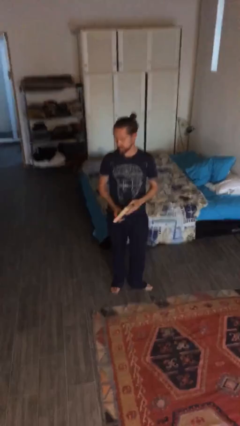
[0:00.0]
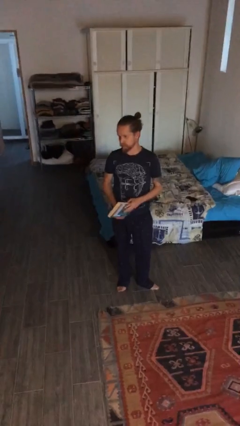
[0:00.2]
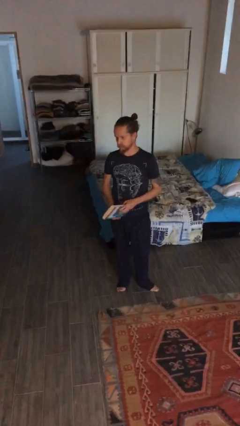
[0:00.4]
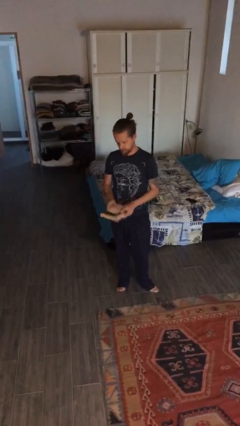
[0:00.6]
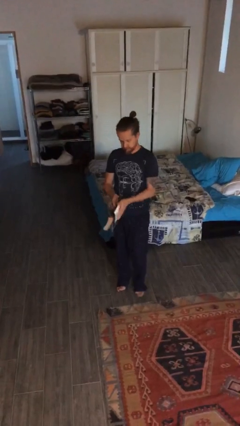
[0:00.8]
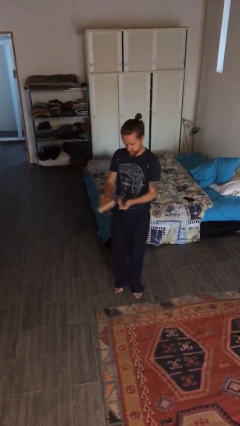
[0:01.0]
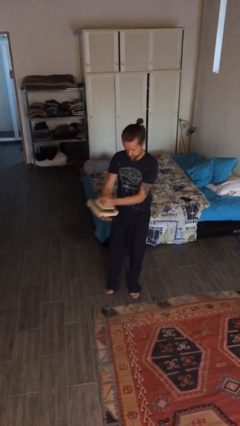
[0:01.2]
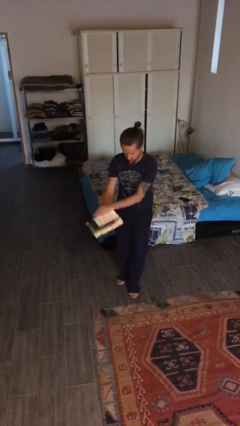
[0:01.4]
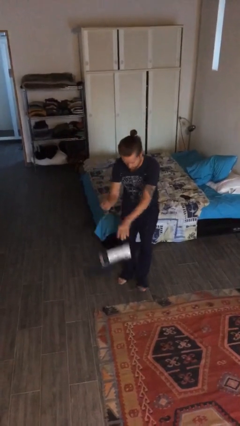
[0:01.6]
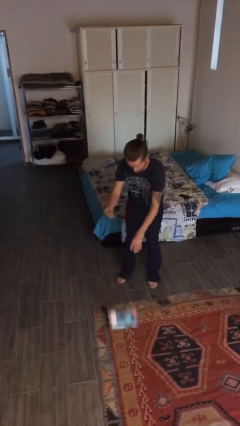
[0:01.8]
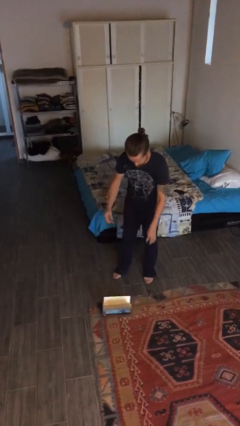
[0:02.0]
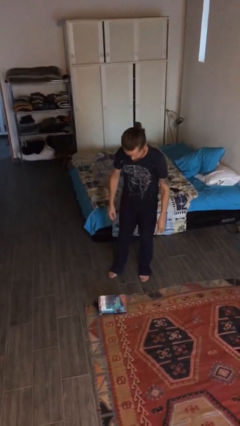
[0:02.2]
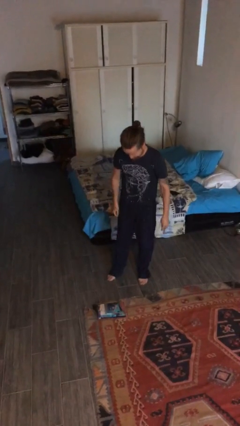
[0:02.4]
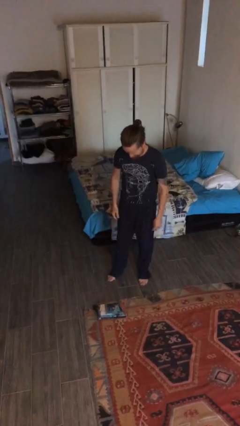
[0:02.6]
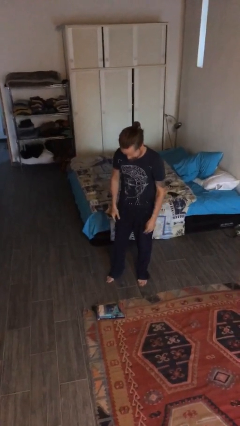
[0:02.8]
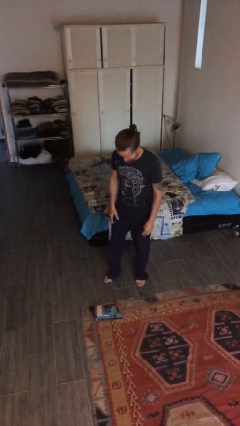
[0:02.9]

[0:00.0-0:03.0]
person drops object

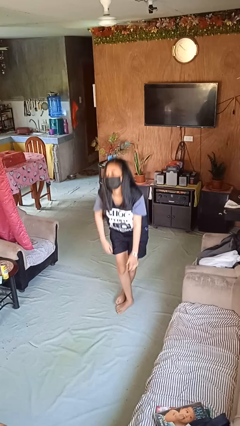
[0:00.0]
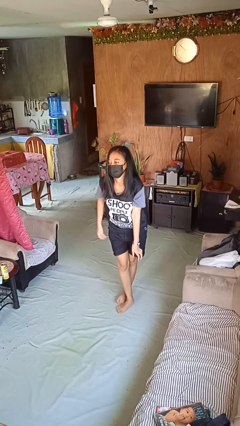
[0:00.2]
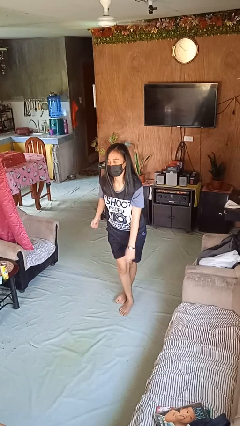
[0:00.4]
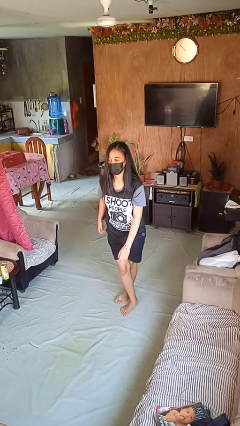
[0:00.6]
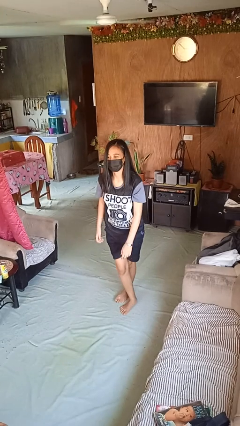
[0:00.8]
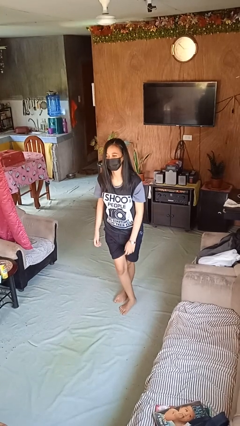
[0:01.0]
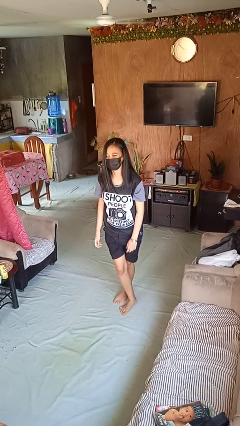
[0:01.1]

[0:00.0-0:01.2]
person stands up from floor

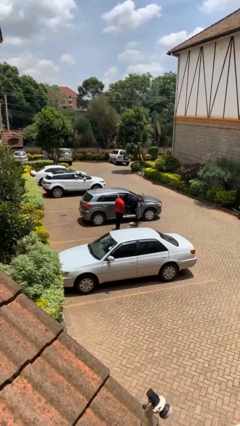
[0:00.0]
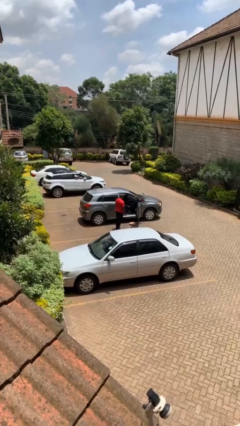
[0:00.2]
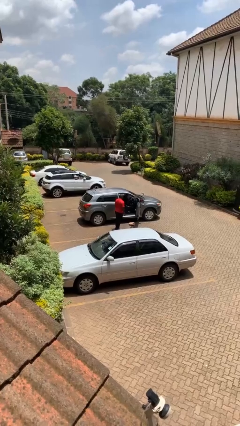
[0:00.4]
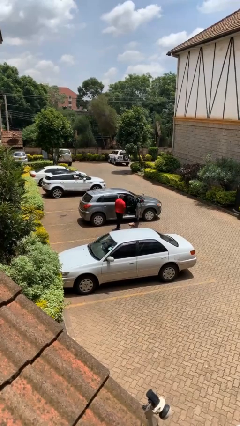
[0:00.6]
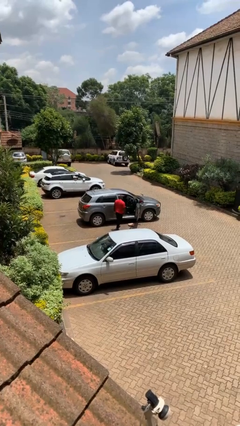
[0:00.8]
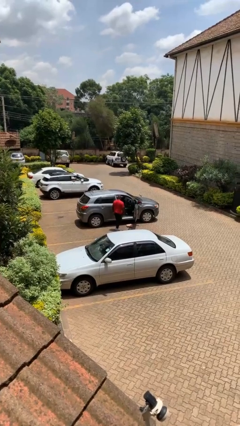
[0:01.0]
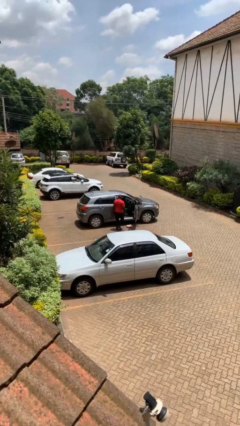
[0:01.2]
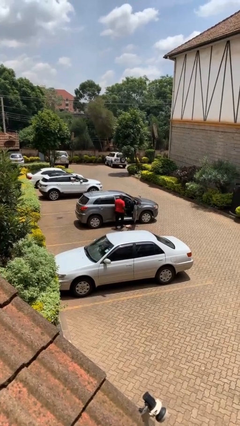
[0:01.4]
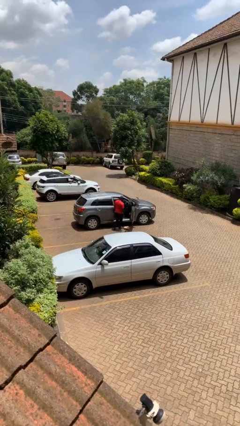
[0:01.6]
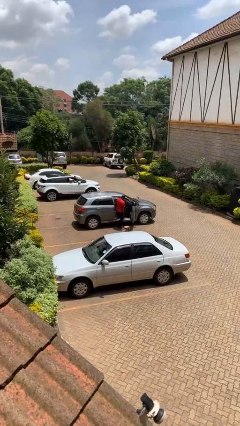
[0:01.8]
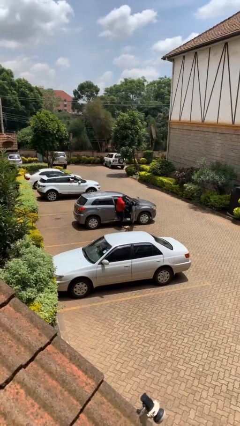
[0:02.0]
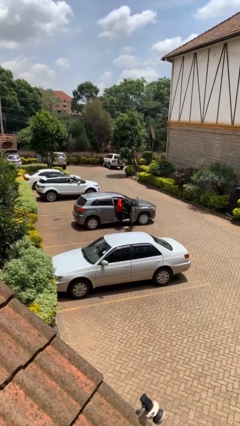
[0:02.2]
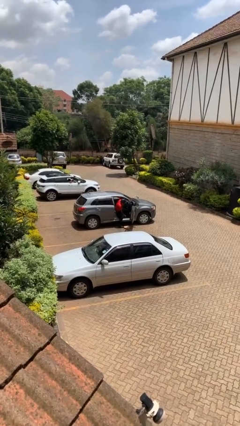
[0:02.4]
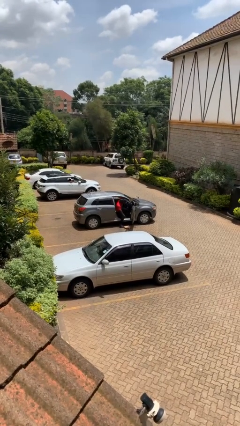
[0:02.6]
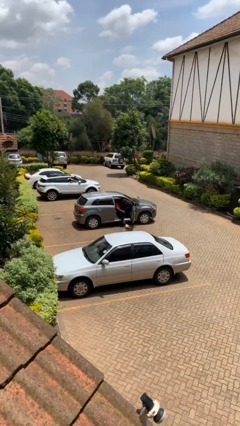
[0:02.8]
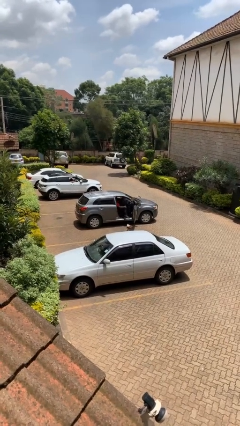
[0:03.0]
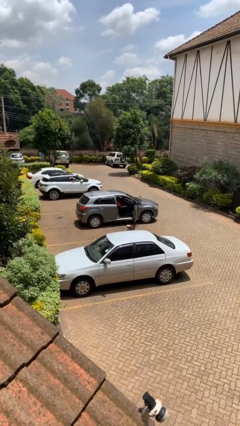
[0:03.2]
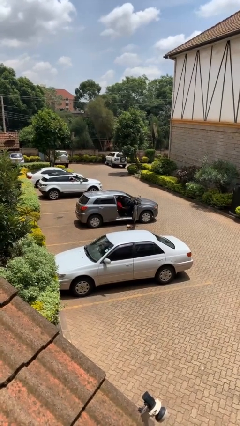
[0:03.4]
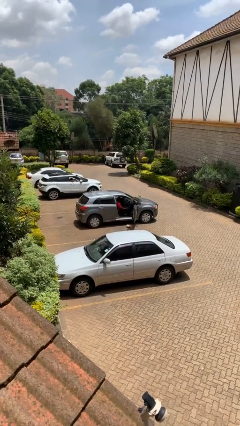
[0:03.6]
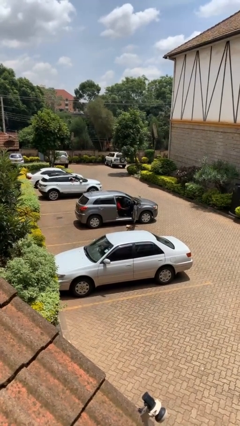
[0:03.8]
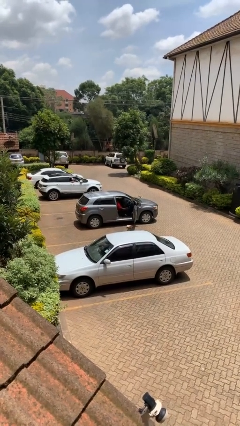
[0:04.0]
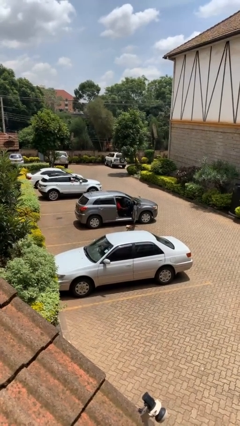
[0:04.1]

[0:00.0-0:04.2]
person enters car

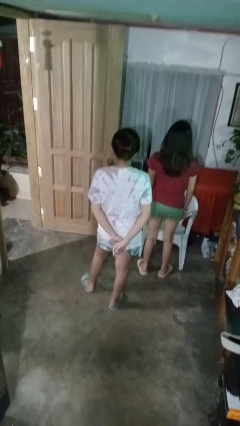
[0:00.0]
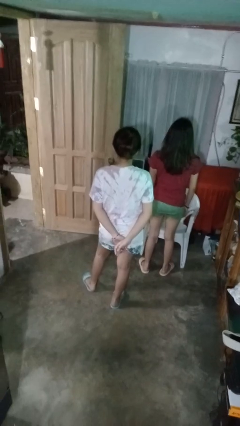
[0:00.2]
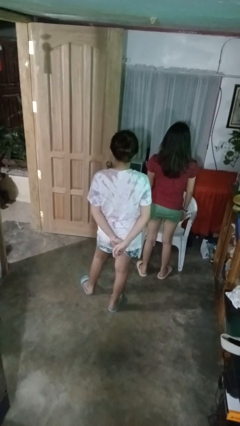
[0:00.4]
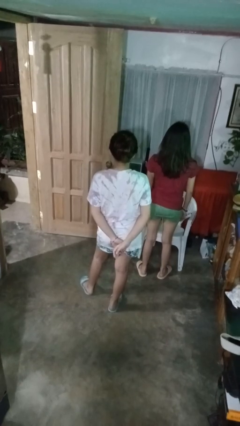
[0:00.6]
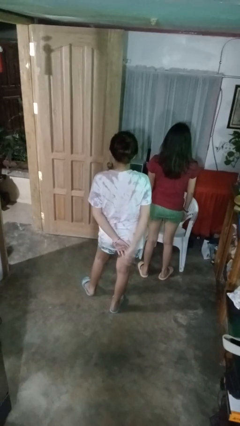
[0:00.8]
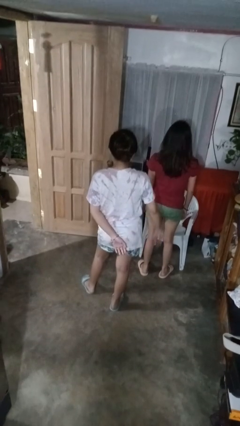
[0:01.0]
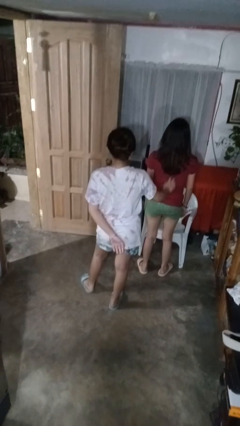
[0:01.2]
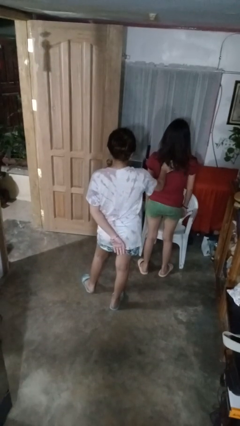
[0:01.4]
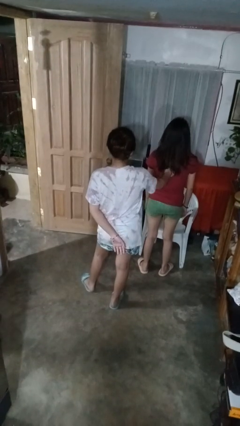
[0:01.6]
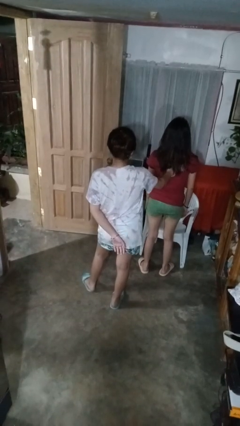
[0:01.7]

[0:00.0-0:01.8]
person touches back of person

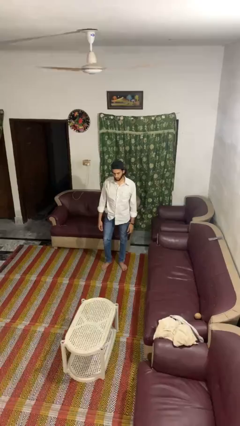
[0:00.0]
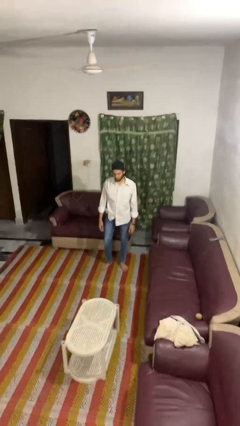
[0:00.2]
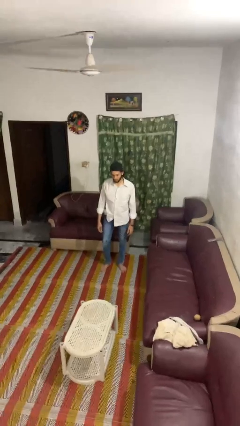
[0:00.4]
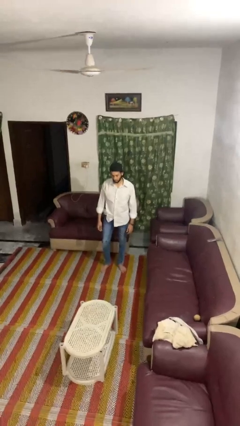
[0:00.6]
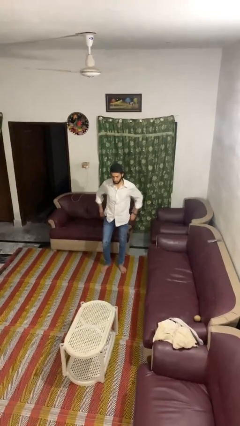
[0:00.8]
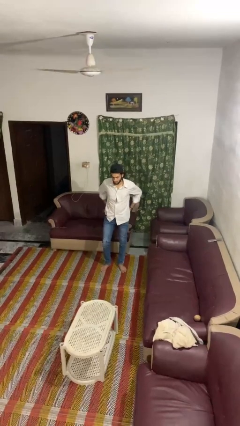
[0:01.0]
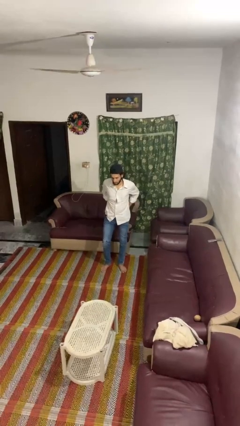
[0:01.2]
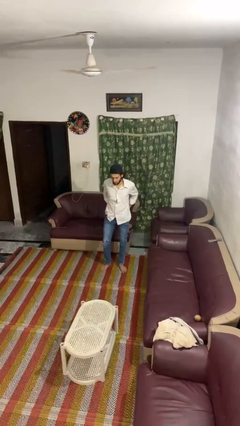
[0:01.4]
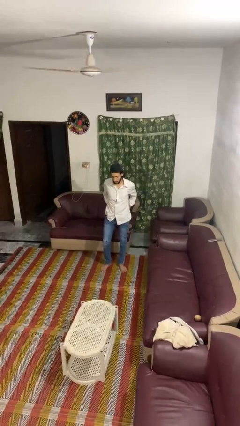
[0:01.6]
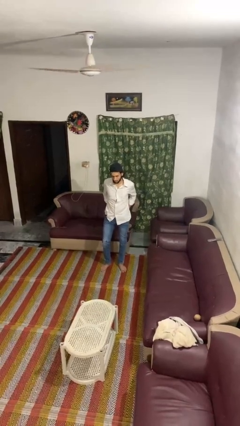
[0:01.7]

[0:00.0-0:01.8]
person puts hands in back pockets

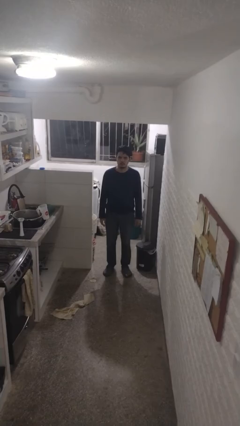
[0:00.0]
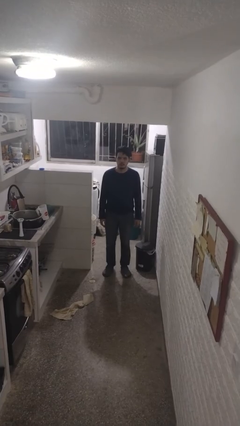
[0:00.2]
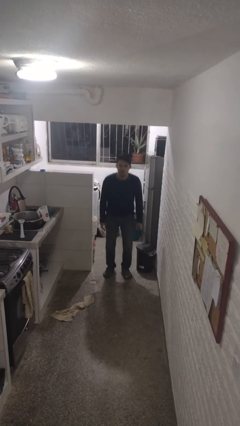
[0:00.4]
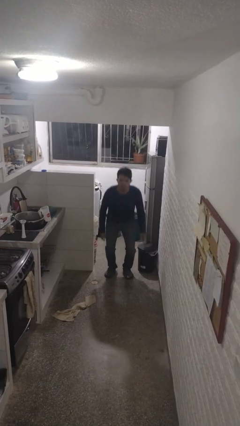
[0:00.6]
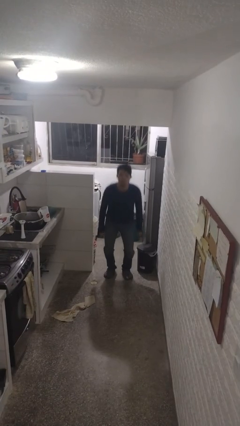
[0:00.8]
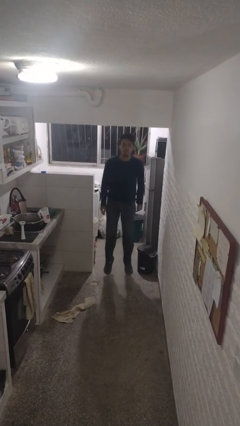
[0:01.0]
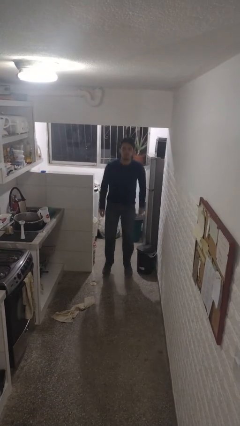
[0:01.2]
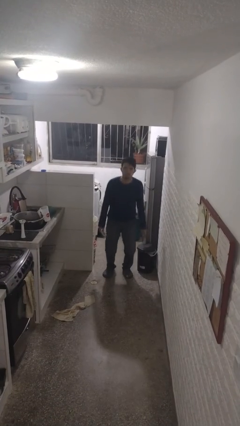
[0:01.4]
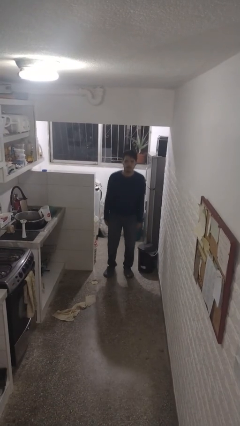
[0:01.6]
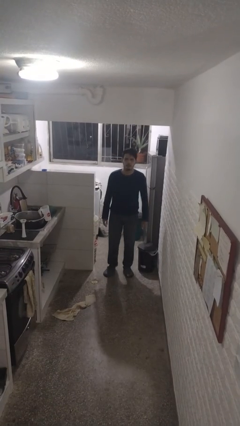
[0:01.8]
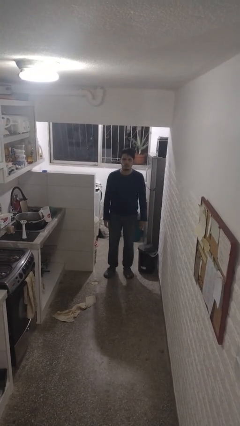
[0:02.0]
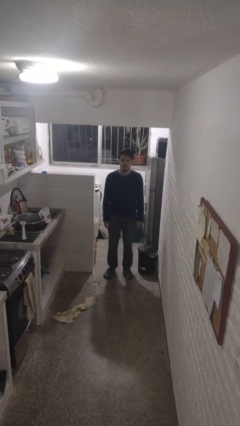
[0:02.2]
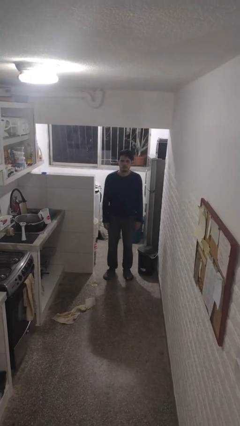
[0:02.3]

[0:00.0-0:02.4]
person jumps

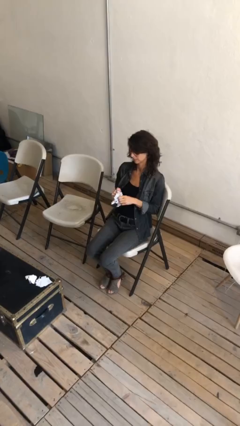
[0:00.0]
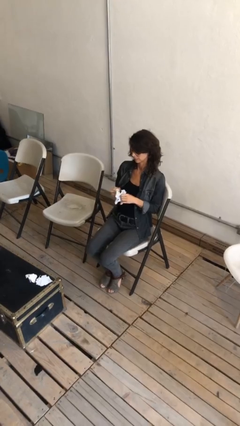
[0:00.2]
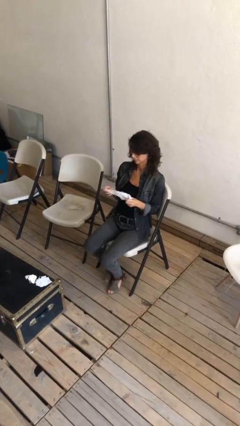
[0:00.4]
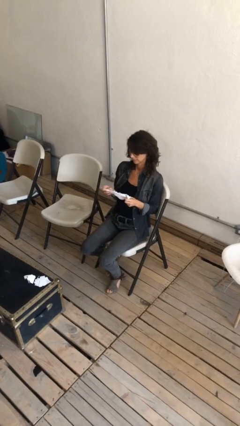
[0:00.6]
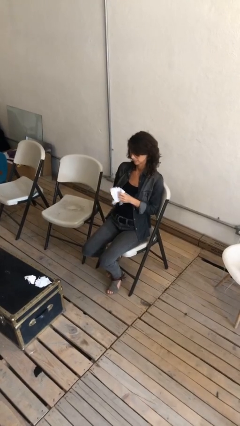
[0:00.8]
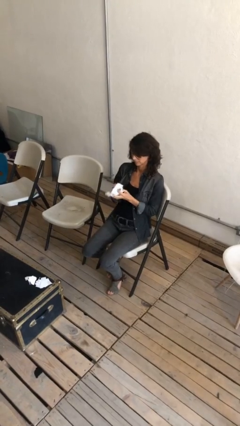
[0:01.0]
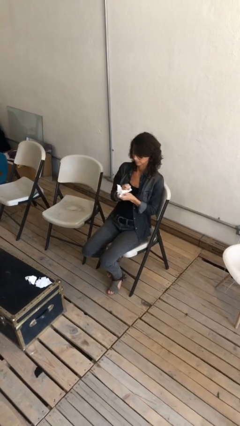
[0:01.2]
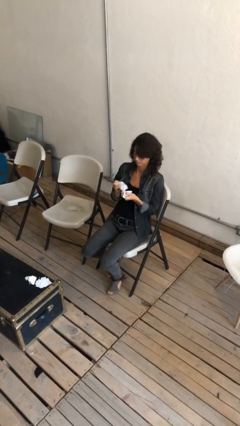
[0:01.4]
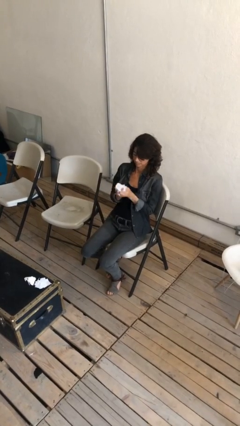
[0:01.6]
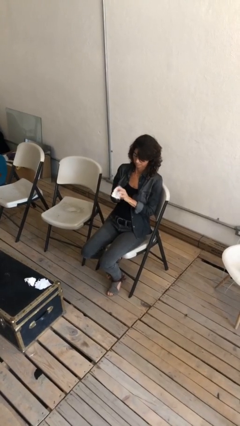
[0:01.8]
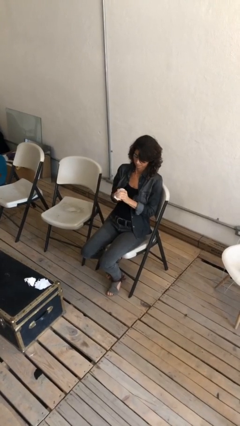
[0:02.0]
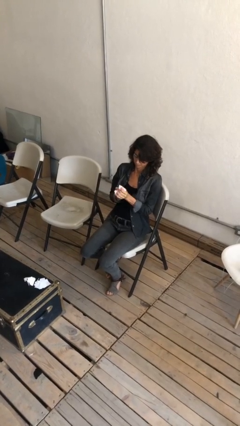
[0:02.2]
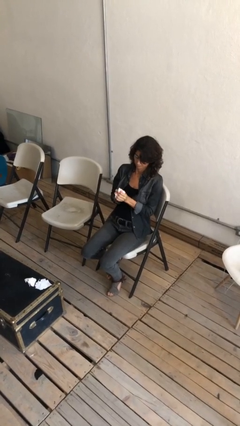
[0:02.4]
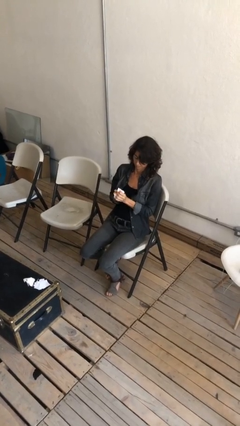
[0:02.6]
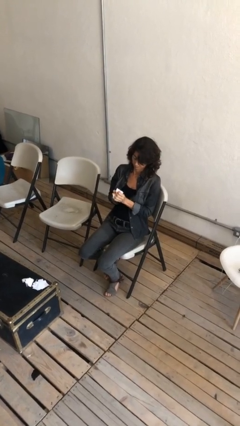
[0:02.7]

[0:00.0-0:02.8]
person crumples paper
